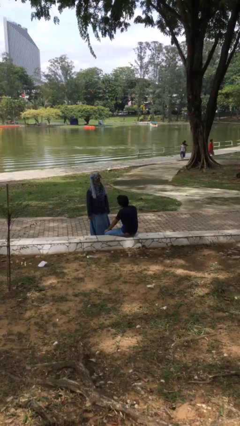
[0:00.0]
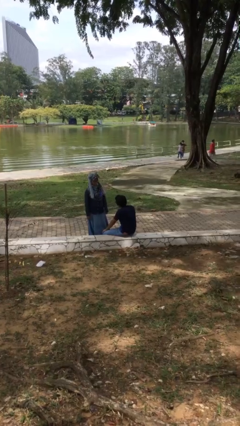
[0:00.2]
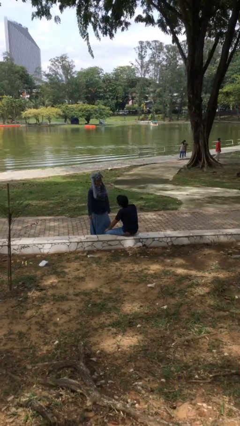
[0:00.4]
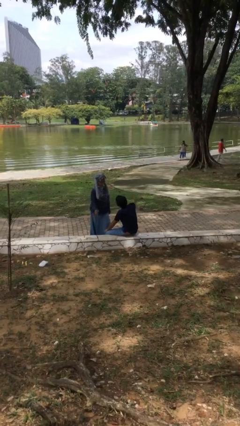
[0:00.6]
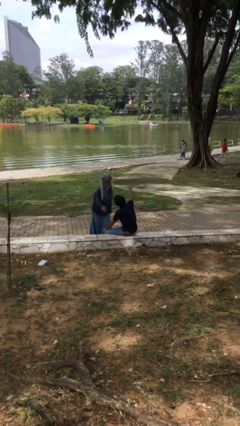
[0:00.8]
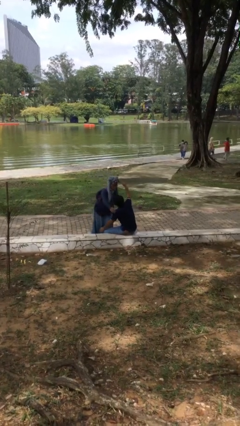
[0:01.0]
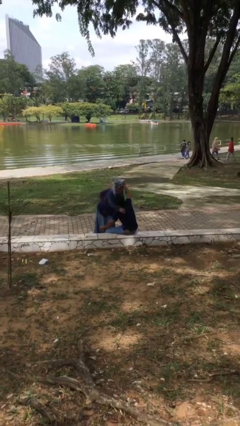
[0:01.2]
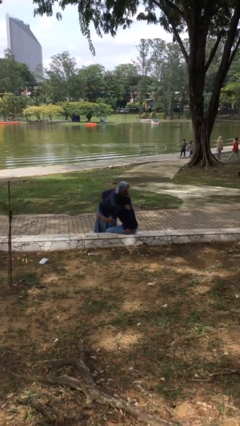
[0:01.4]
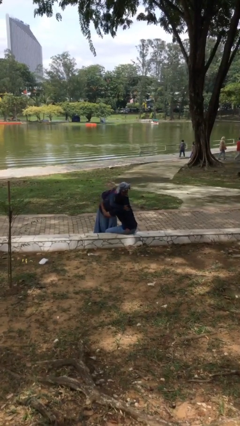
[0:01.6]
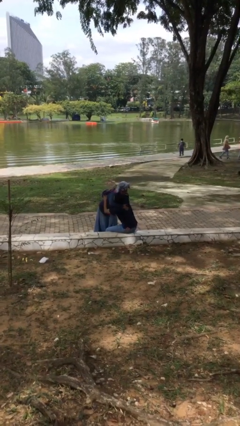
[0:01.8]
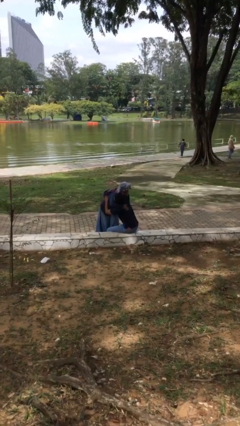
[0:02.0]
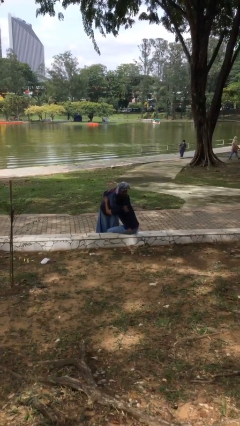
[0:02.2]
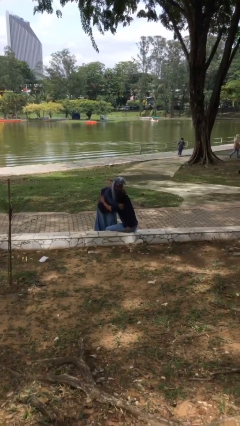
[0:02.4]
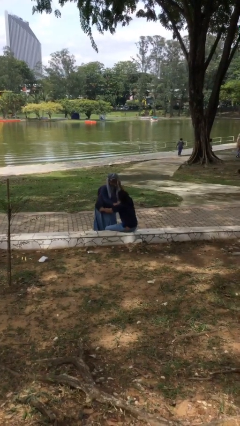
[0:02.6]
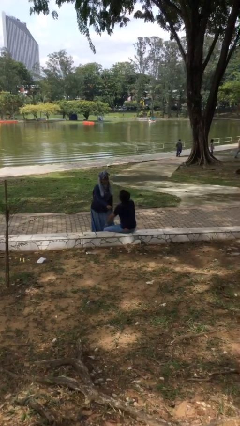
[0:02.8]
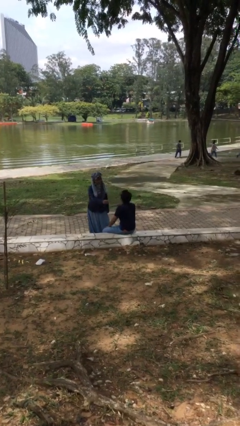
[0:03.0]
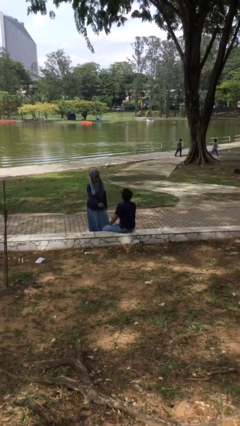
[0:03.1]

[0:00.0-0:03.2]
person embraces person

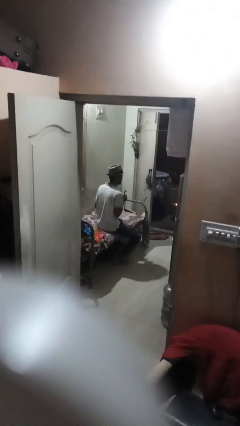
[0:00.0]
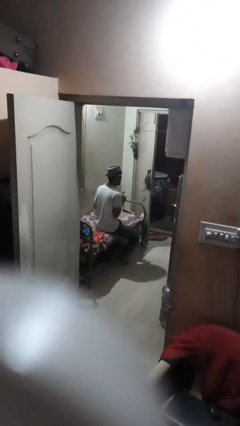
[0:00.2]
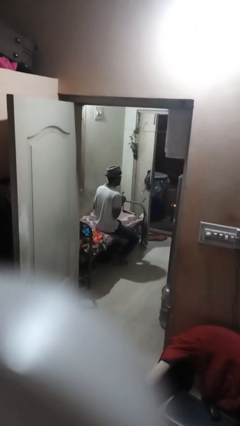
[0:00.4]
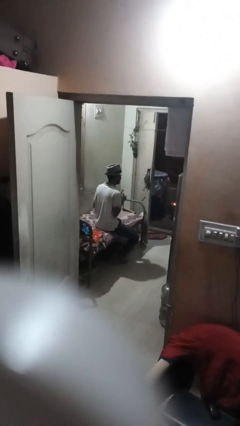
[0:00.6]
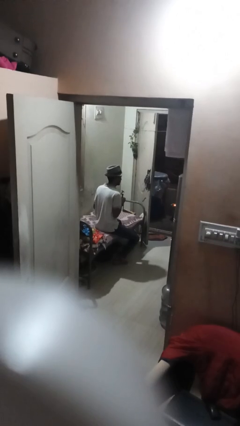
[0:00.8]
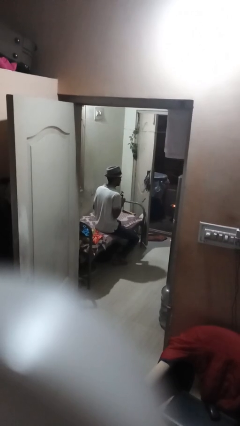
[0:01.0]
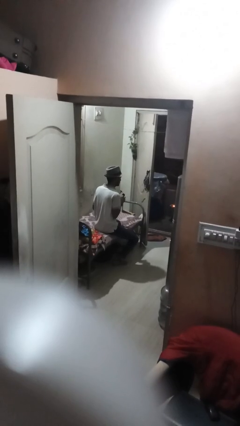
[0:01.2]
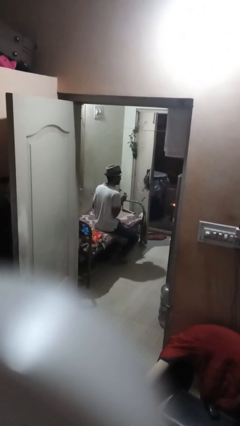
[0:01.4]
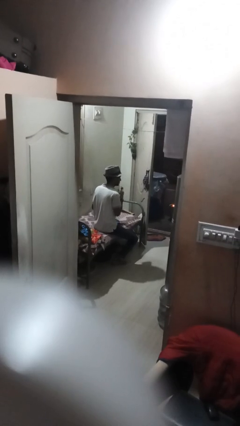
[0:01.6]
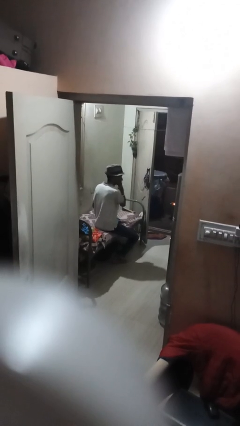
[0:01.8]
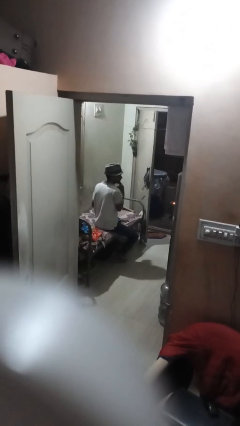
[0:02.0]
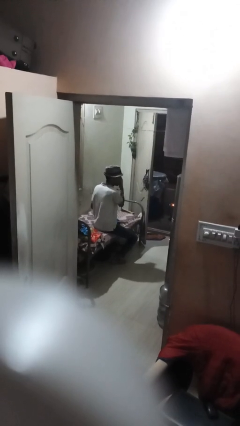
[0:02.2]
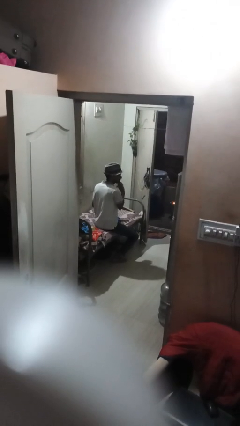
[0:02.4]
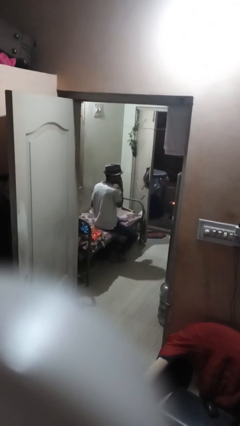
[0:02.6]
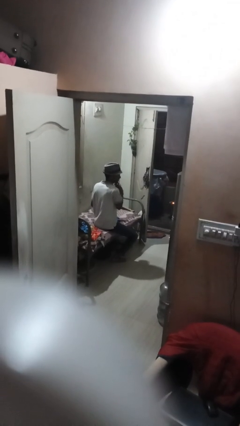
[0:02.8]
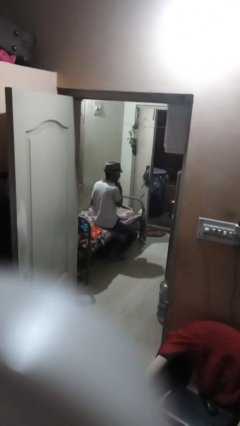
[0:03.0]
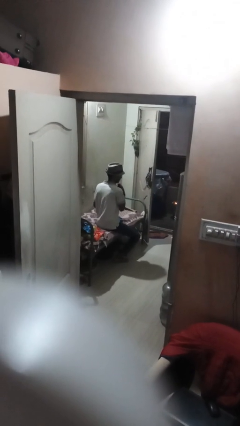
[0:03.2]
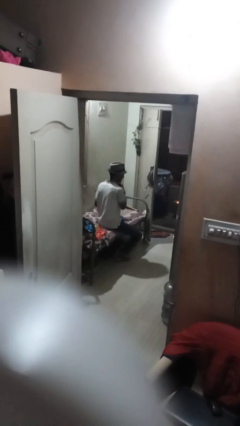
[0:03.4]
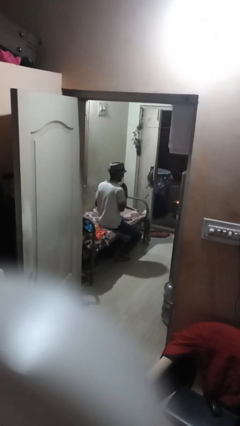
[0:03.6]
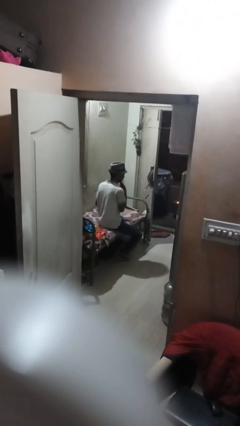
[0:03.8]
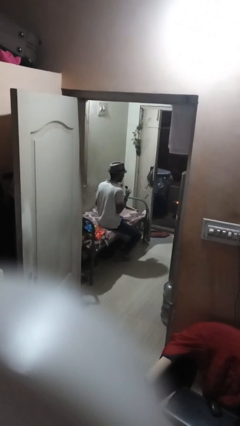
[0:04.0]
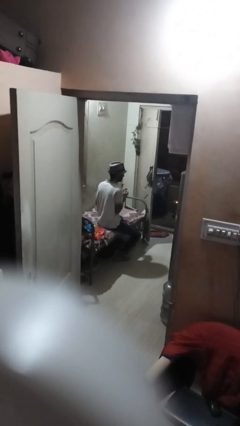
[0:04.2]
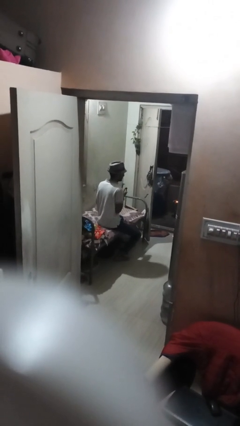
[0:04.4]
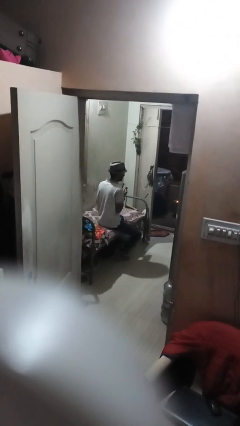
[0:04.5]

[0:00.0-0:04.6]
person applies shaving cream

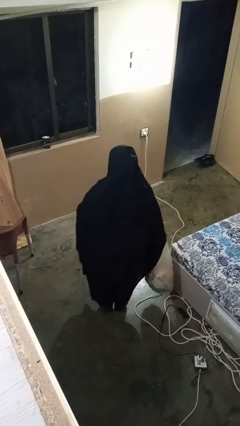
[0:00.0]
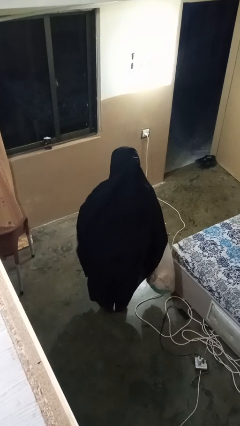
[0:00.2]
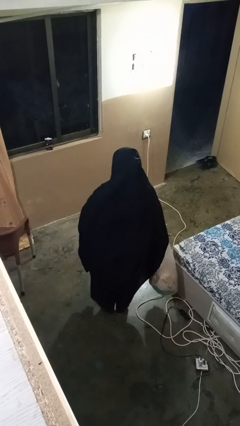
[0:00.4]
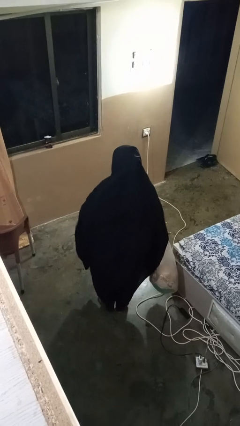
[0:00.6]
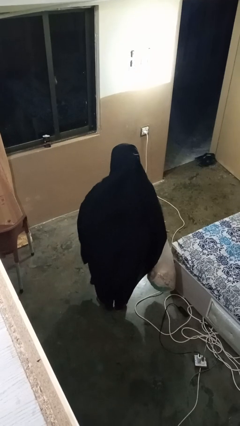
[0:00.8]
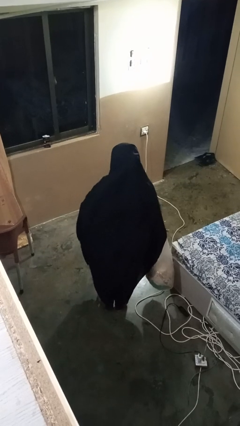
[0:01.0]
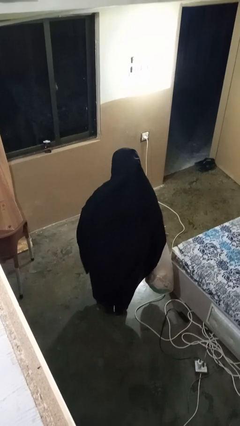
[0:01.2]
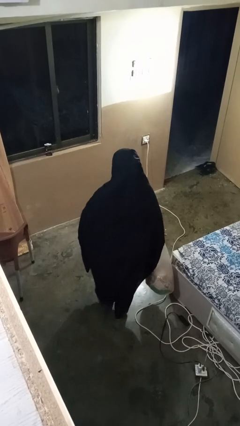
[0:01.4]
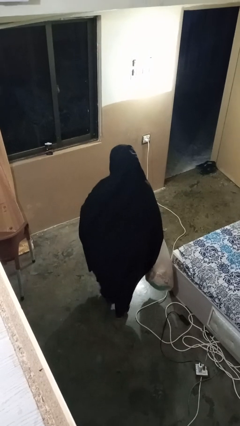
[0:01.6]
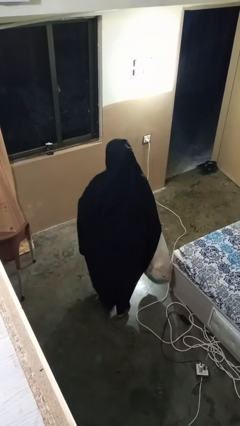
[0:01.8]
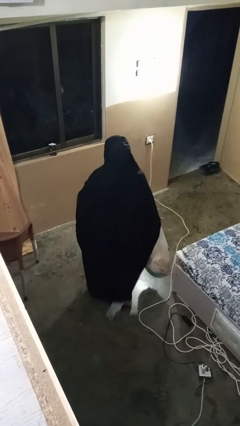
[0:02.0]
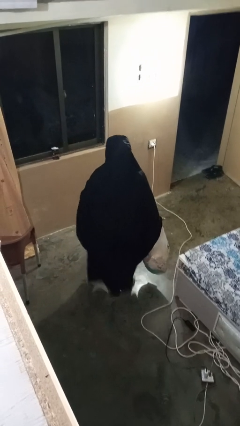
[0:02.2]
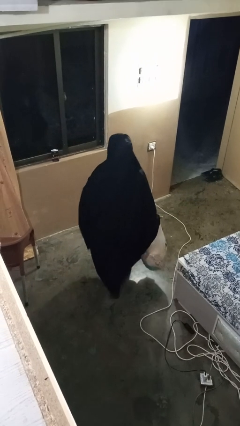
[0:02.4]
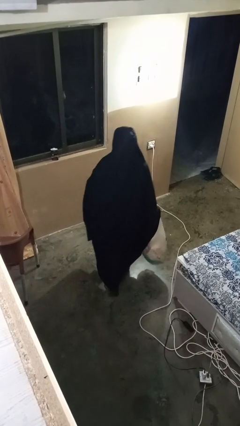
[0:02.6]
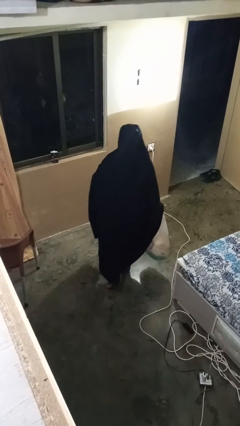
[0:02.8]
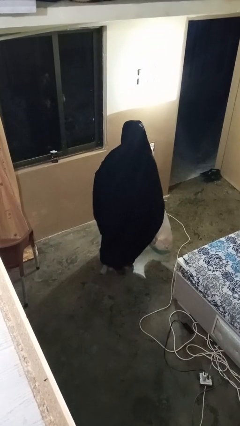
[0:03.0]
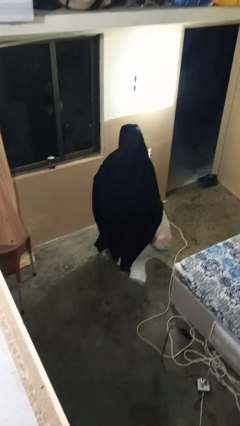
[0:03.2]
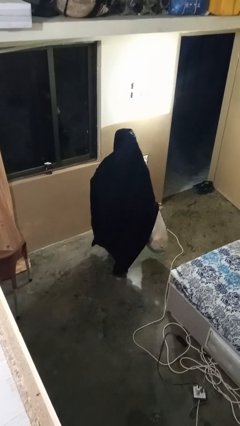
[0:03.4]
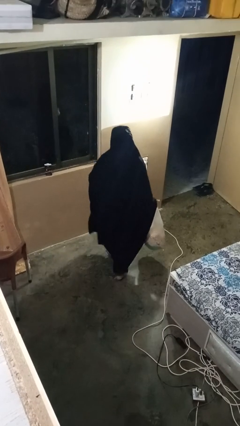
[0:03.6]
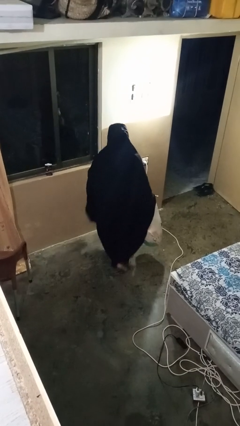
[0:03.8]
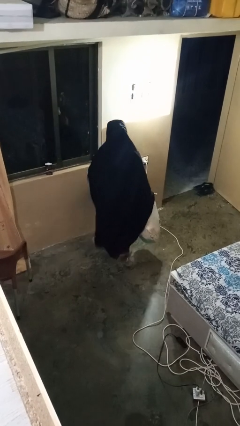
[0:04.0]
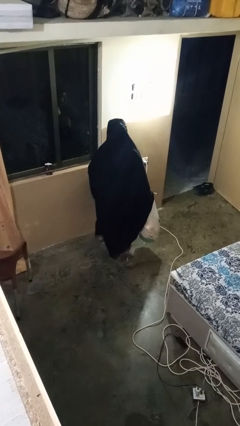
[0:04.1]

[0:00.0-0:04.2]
person carries groceries

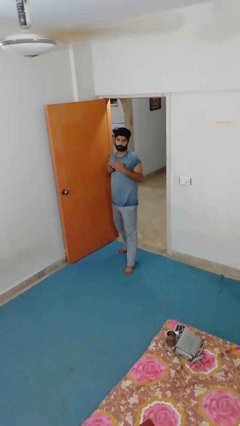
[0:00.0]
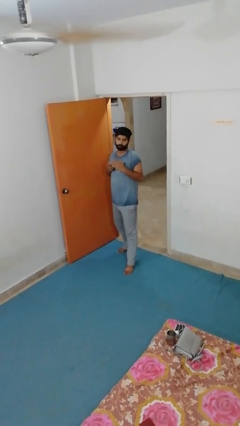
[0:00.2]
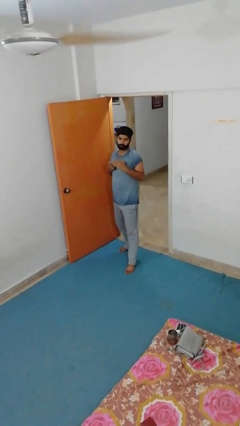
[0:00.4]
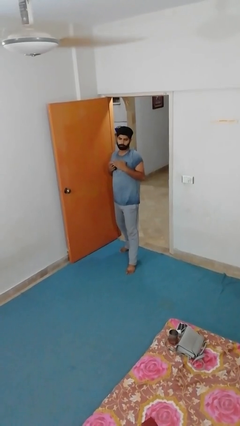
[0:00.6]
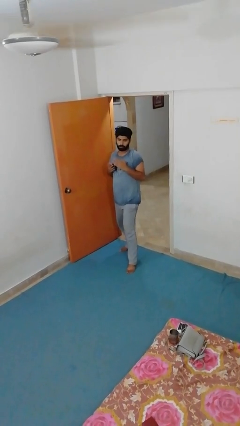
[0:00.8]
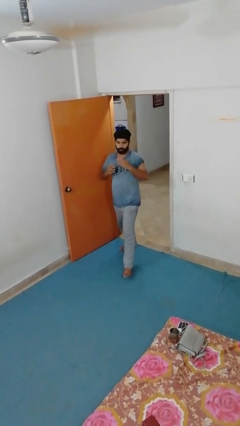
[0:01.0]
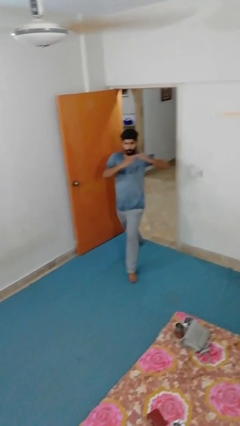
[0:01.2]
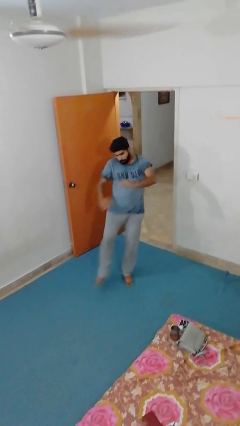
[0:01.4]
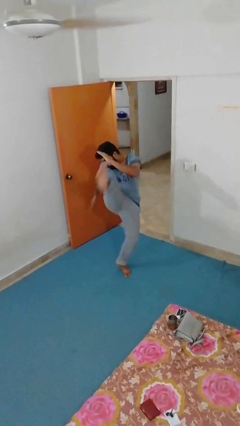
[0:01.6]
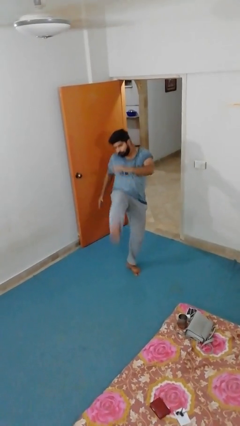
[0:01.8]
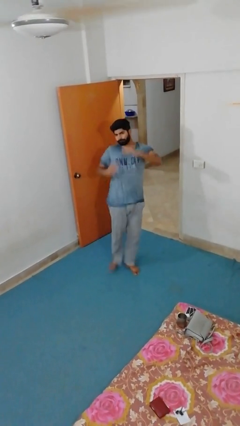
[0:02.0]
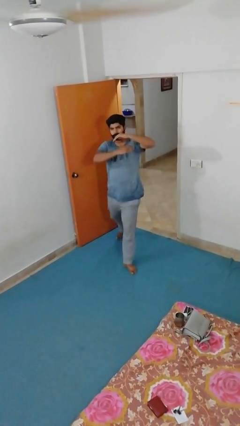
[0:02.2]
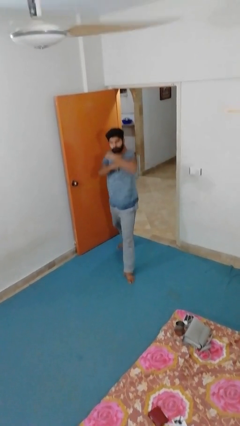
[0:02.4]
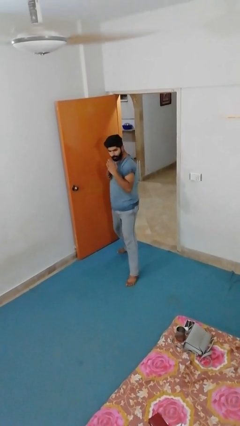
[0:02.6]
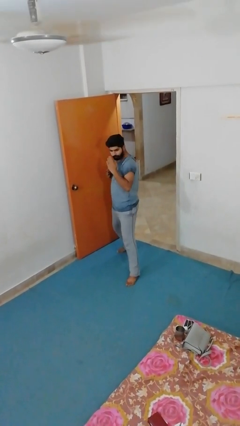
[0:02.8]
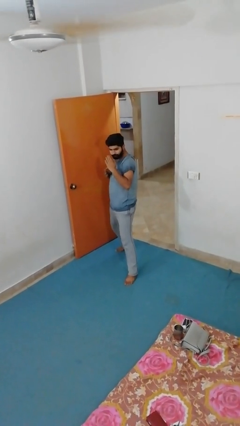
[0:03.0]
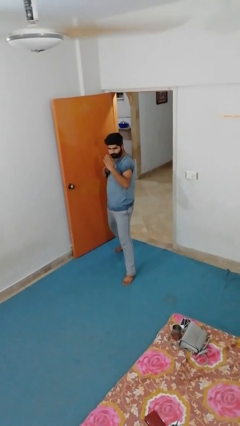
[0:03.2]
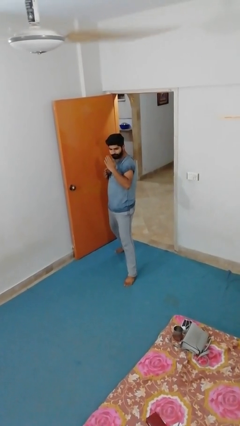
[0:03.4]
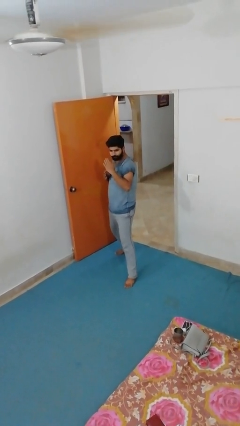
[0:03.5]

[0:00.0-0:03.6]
person karate kicks

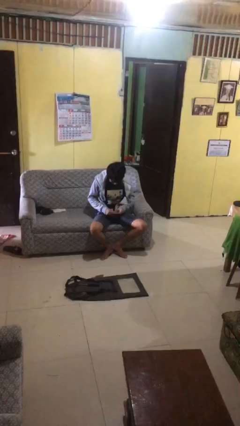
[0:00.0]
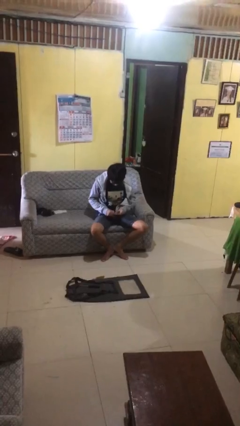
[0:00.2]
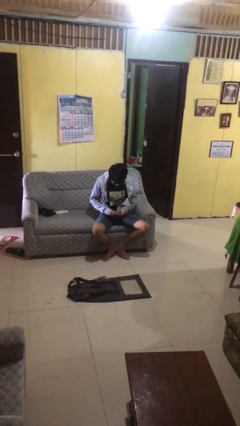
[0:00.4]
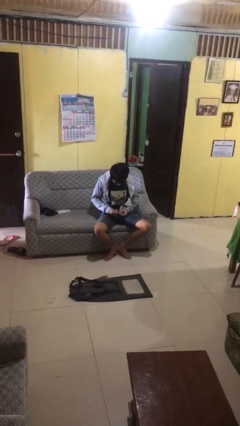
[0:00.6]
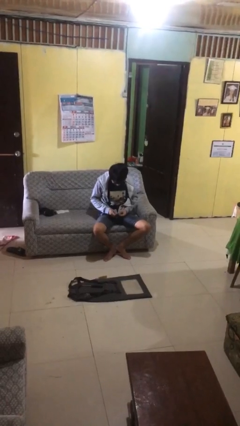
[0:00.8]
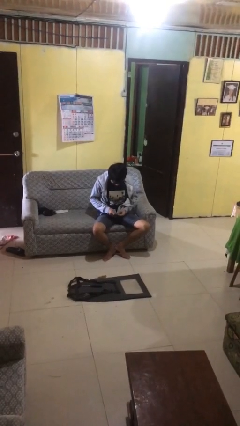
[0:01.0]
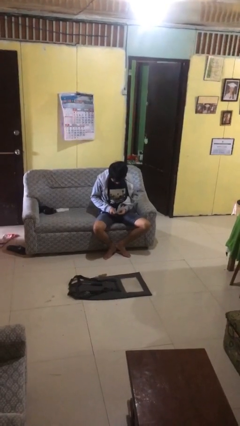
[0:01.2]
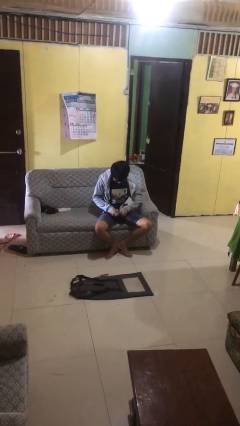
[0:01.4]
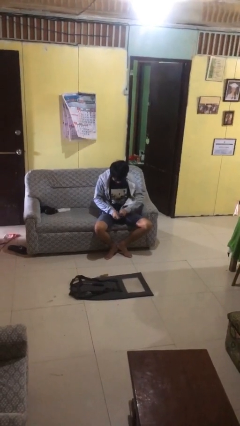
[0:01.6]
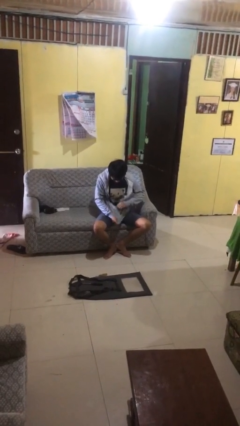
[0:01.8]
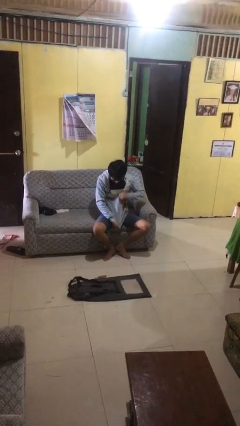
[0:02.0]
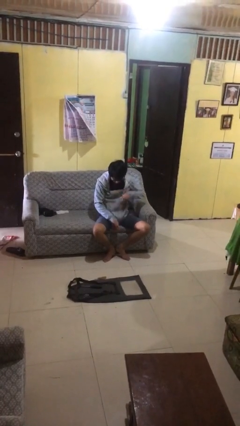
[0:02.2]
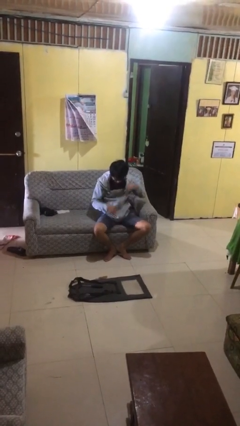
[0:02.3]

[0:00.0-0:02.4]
person zips up jacket
